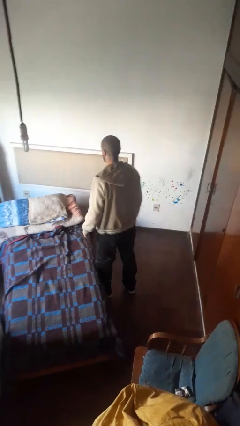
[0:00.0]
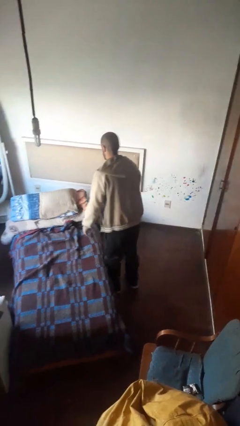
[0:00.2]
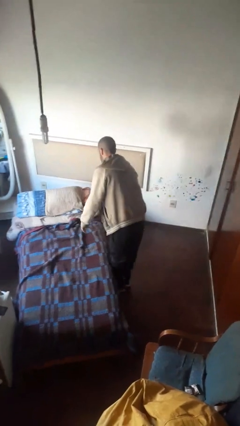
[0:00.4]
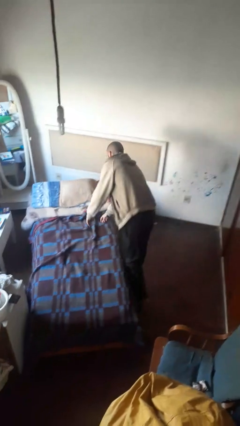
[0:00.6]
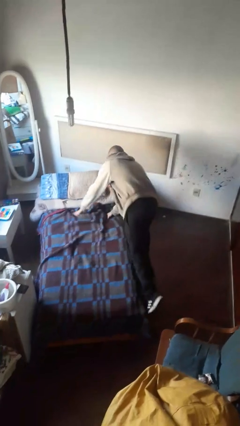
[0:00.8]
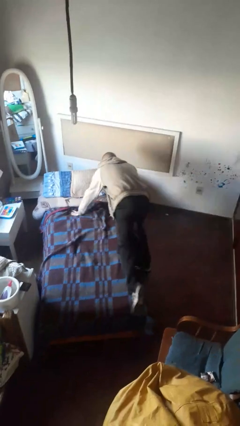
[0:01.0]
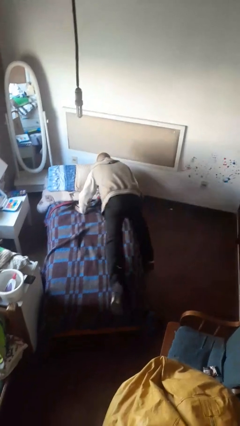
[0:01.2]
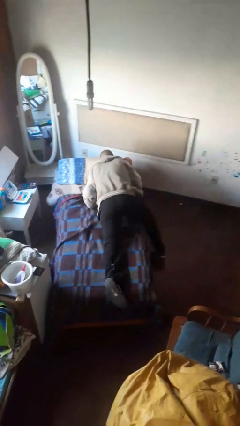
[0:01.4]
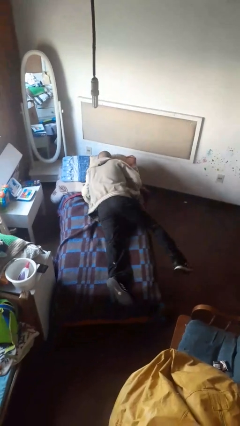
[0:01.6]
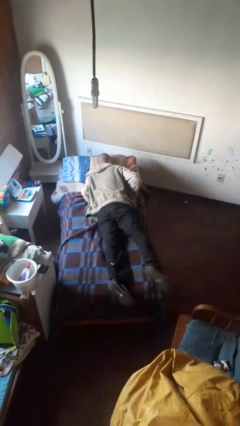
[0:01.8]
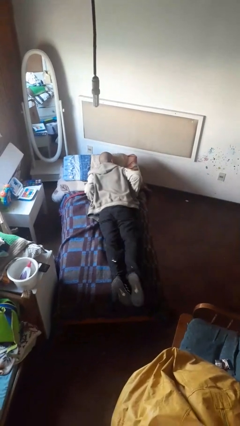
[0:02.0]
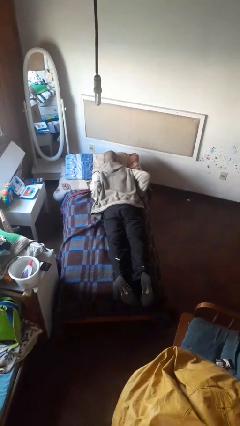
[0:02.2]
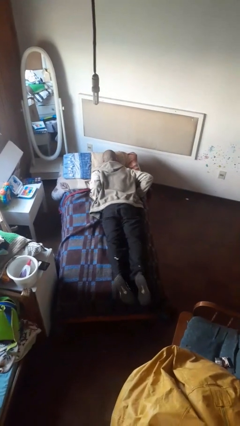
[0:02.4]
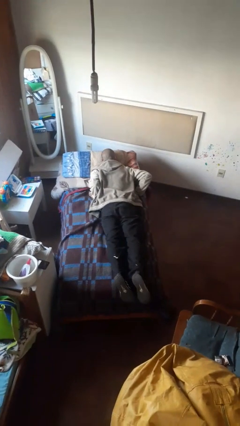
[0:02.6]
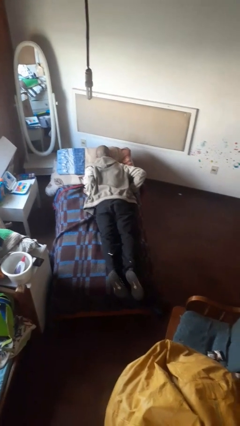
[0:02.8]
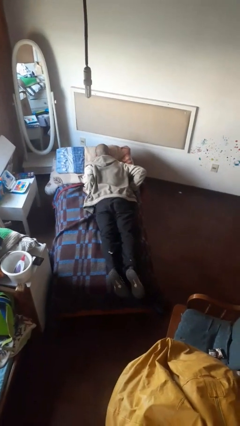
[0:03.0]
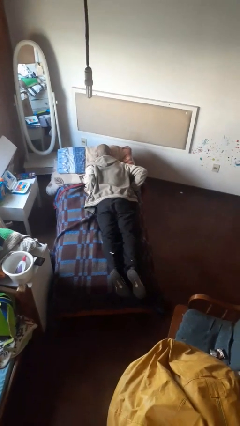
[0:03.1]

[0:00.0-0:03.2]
person lies down on bed

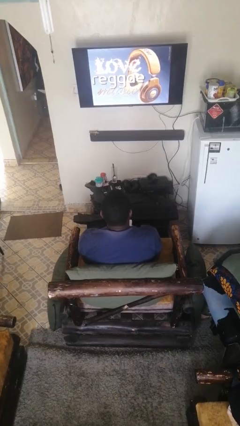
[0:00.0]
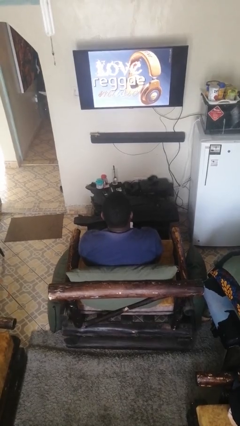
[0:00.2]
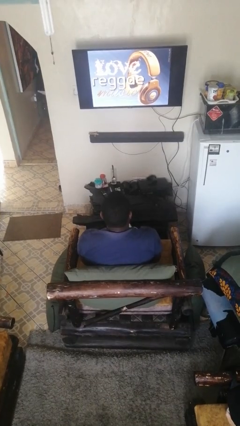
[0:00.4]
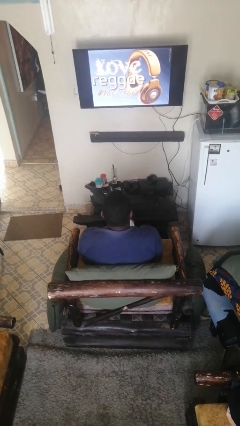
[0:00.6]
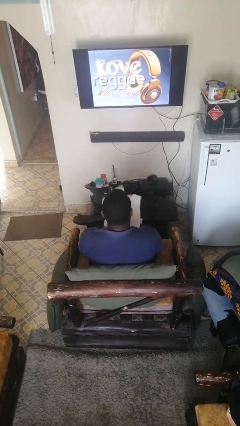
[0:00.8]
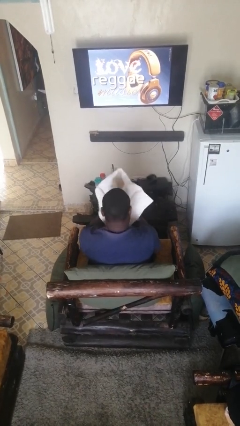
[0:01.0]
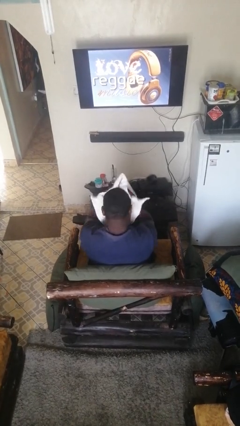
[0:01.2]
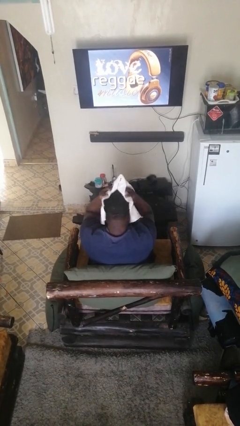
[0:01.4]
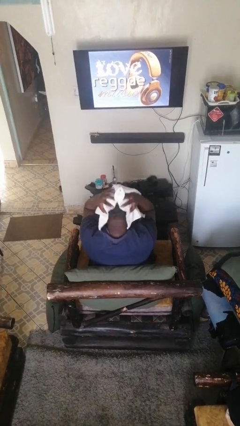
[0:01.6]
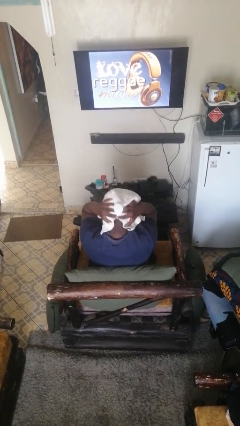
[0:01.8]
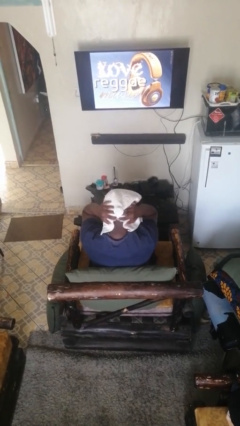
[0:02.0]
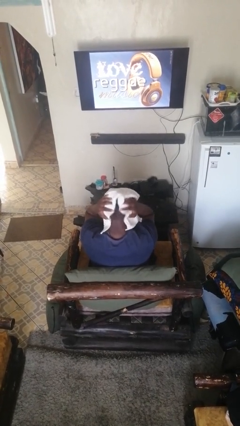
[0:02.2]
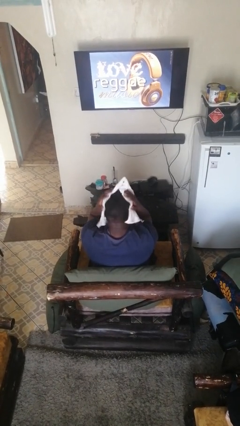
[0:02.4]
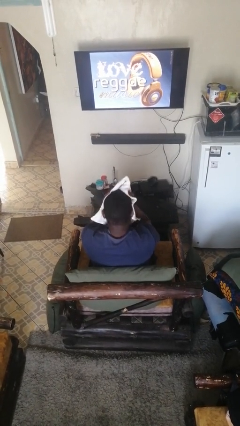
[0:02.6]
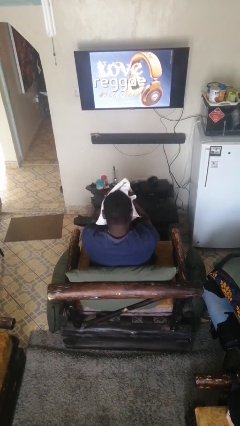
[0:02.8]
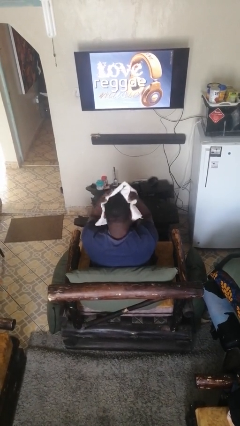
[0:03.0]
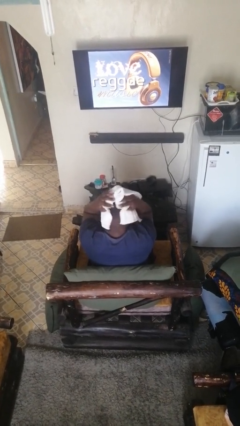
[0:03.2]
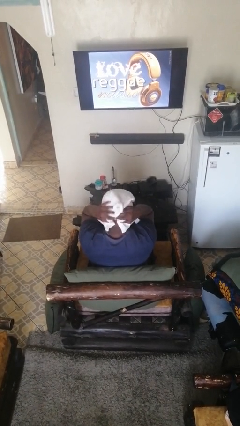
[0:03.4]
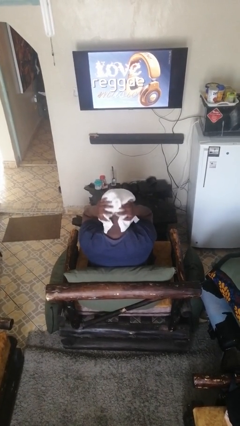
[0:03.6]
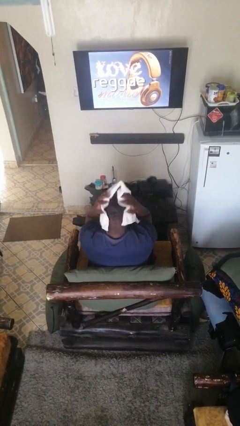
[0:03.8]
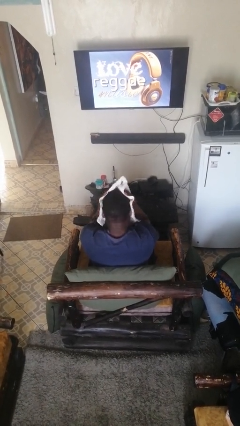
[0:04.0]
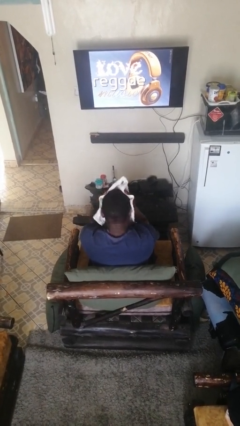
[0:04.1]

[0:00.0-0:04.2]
person dries hair with towel

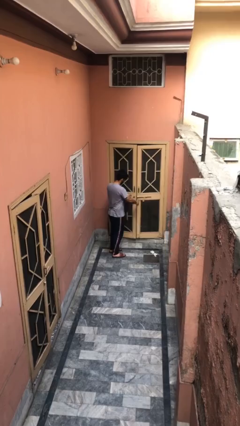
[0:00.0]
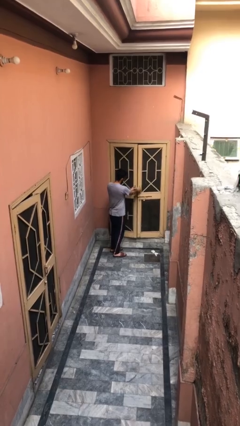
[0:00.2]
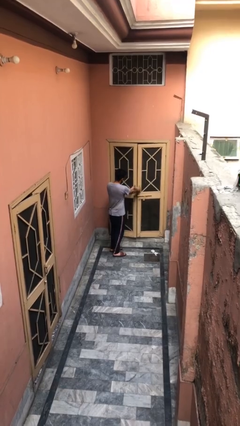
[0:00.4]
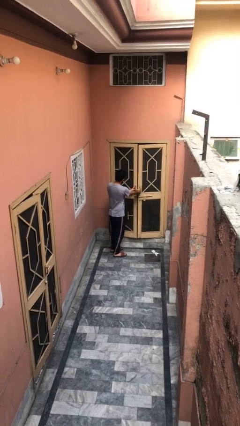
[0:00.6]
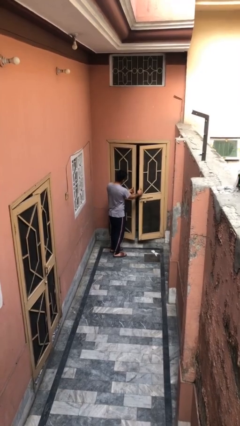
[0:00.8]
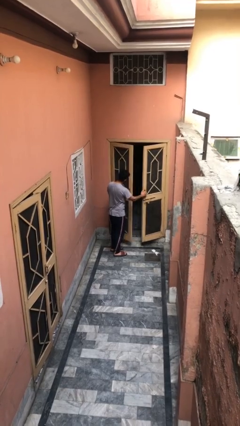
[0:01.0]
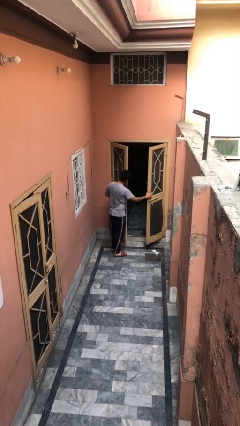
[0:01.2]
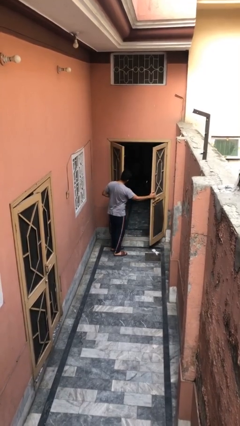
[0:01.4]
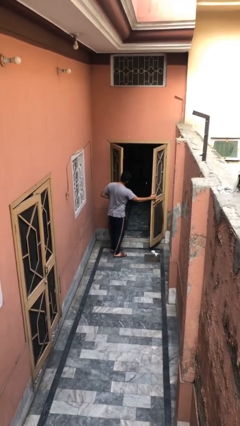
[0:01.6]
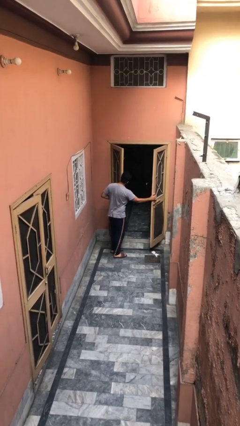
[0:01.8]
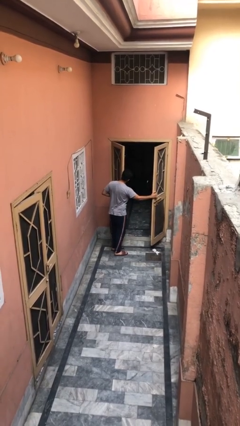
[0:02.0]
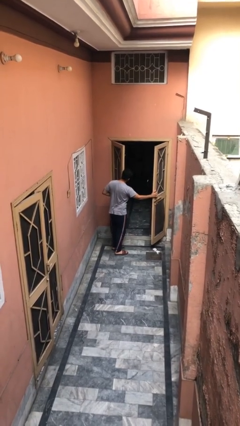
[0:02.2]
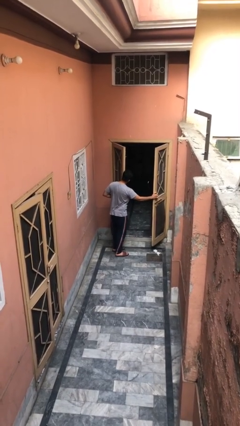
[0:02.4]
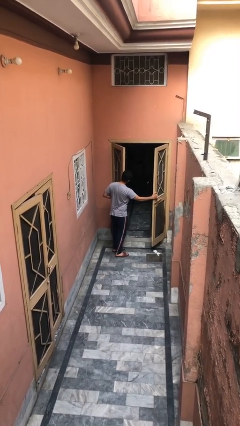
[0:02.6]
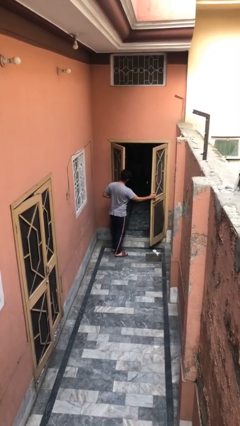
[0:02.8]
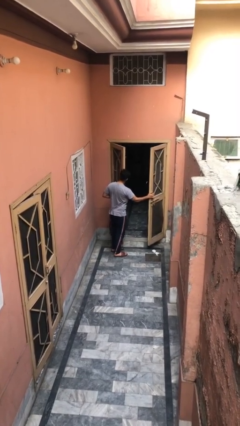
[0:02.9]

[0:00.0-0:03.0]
person opens gate

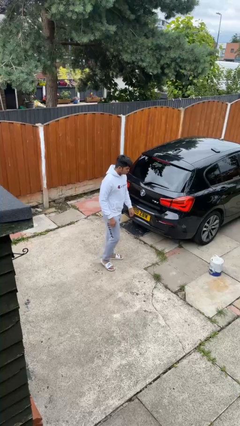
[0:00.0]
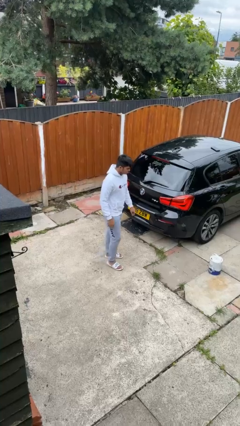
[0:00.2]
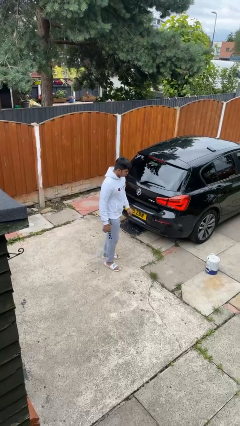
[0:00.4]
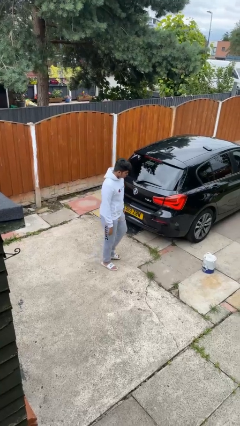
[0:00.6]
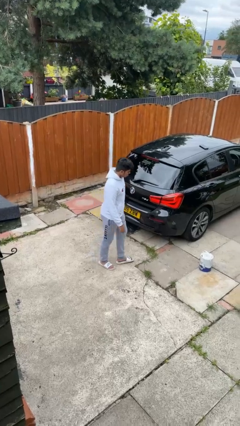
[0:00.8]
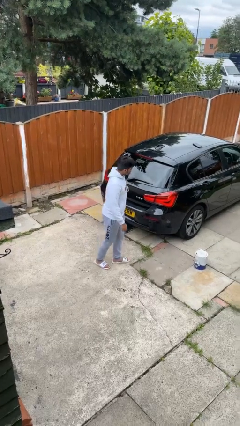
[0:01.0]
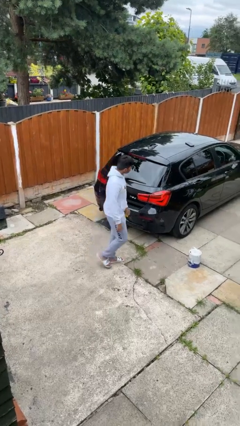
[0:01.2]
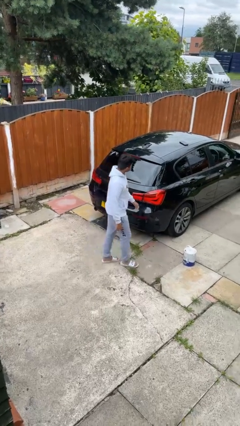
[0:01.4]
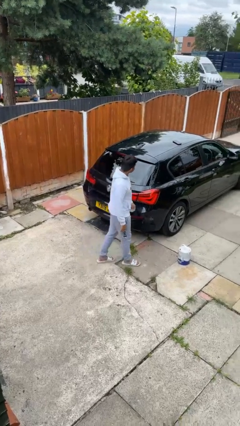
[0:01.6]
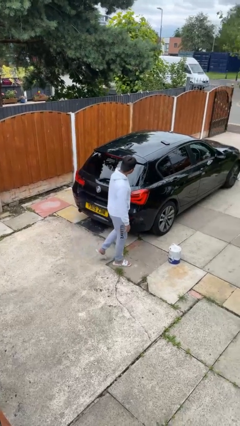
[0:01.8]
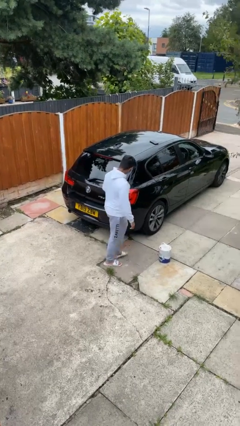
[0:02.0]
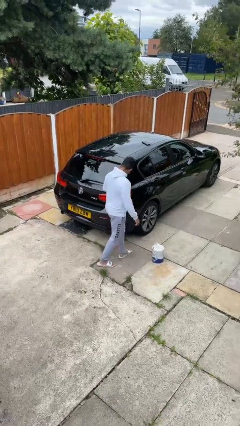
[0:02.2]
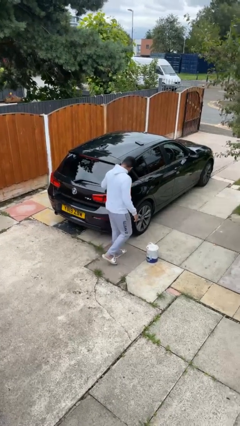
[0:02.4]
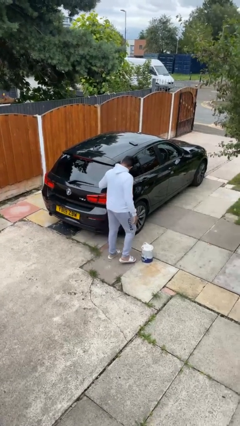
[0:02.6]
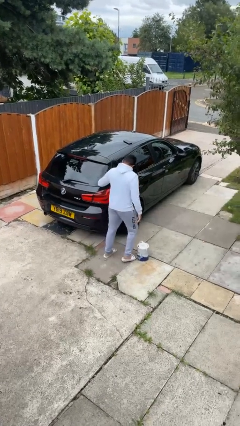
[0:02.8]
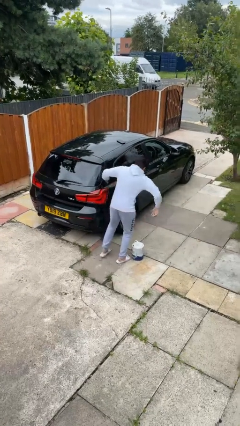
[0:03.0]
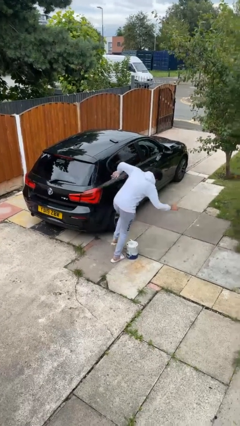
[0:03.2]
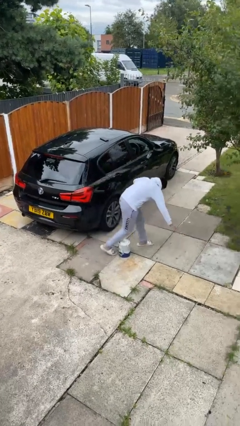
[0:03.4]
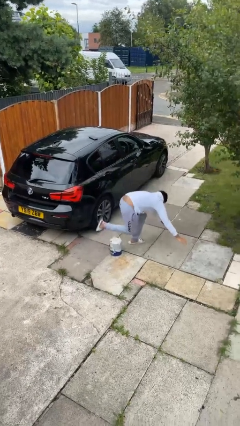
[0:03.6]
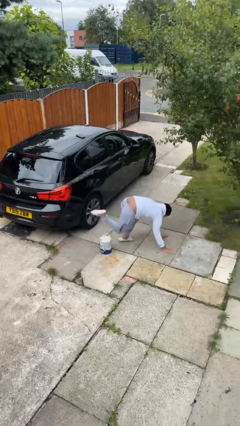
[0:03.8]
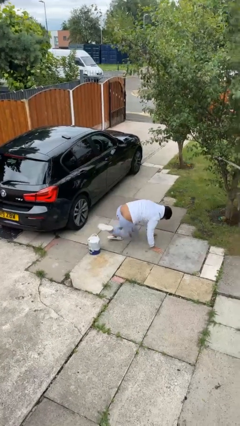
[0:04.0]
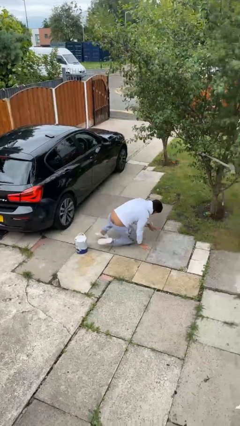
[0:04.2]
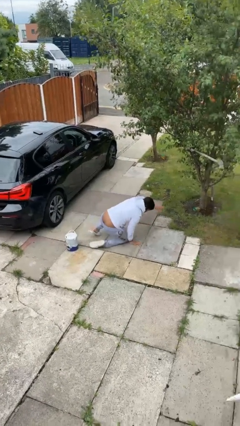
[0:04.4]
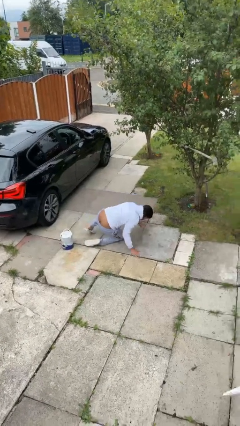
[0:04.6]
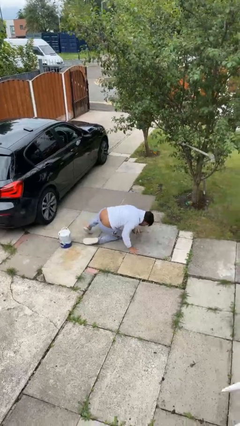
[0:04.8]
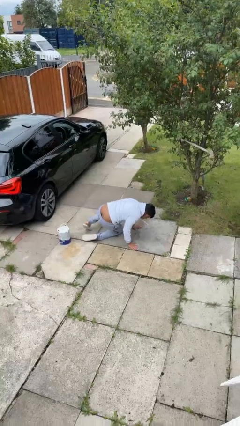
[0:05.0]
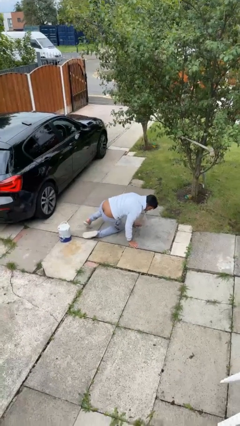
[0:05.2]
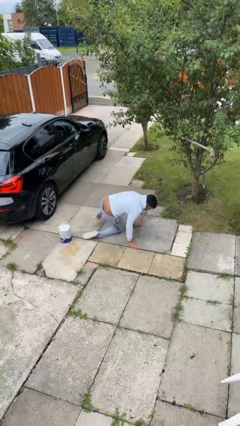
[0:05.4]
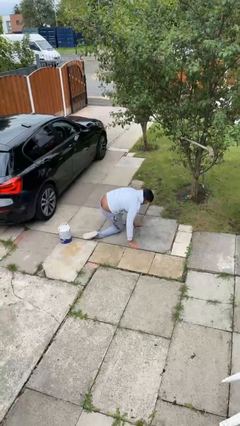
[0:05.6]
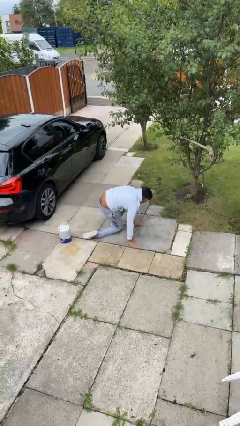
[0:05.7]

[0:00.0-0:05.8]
person trips on object on floor

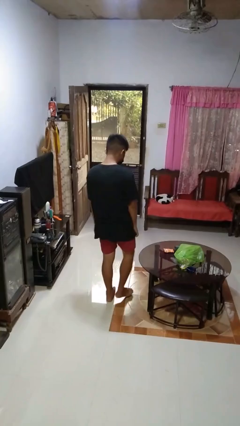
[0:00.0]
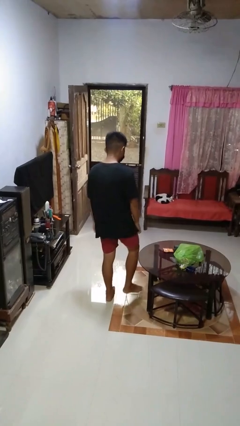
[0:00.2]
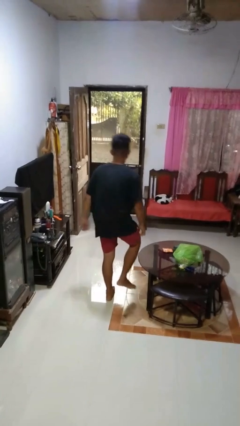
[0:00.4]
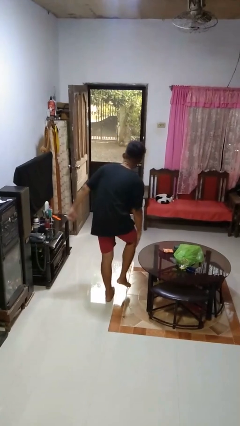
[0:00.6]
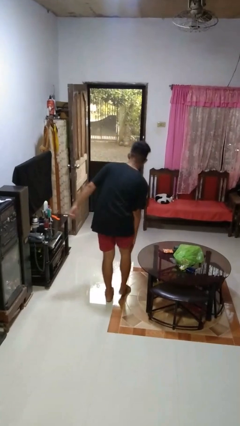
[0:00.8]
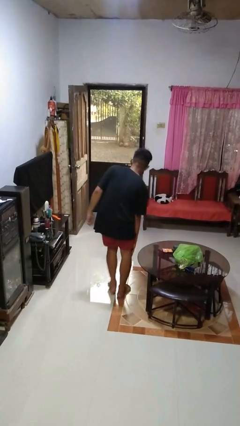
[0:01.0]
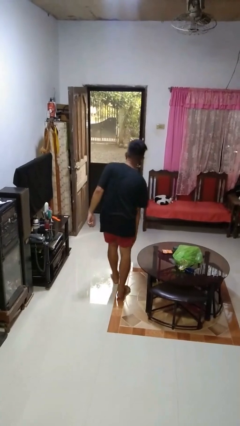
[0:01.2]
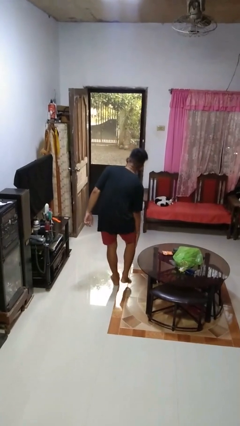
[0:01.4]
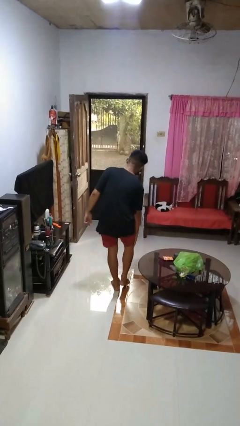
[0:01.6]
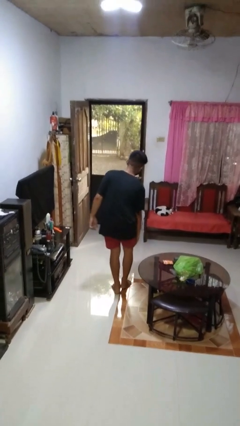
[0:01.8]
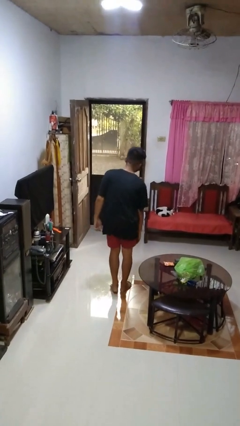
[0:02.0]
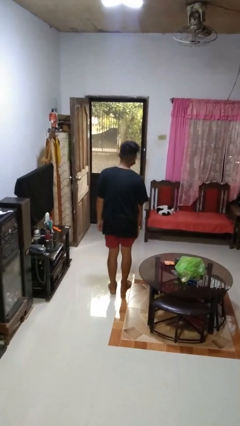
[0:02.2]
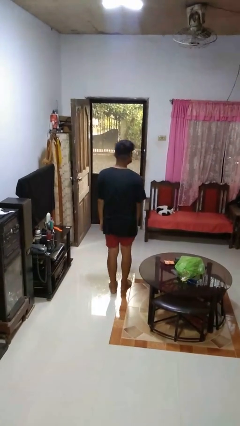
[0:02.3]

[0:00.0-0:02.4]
person bumps into table
